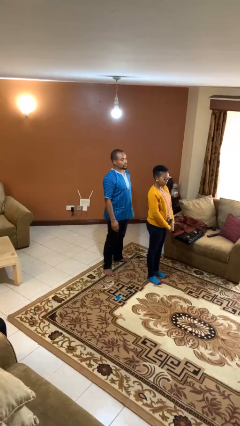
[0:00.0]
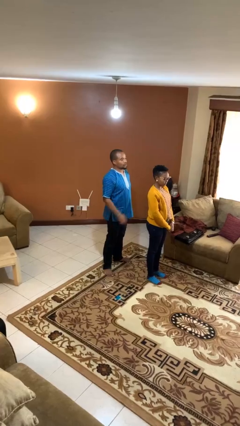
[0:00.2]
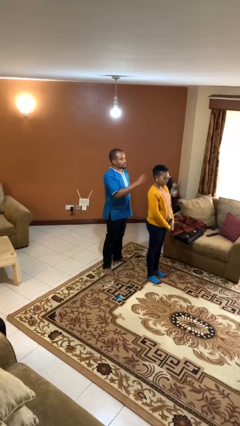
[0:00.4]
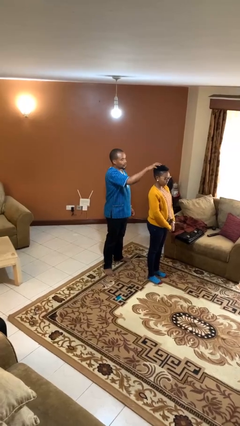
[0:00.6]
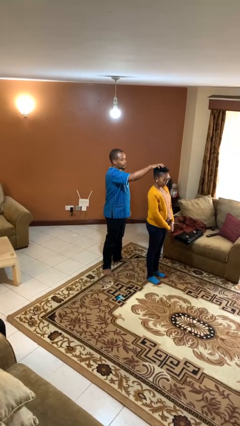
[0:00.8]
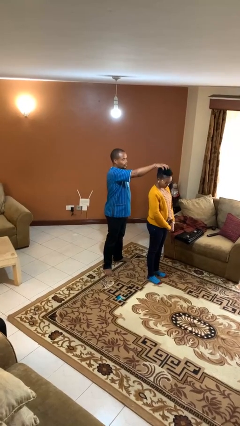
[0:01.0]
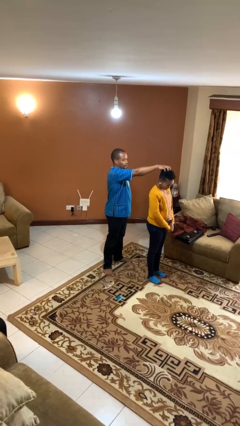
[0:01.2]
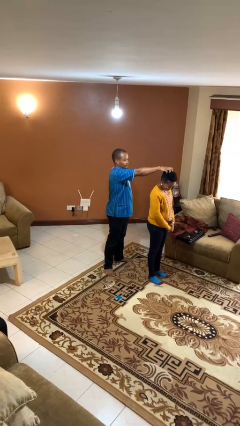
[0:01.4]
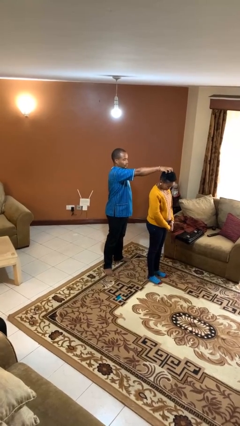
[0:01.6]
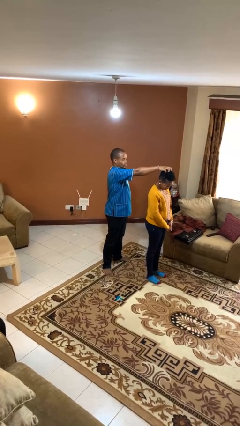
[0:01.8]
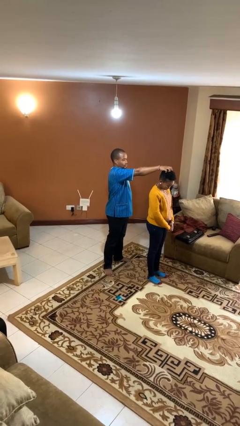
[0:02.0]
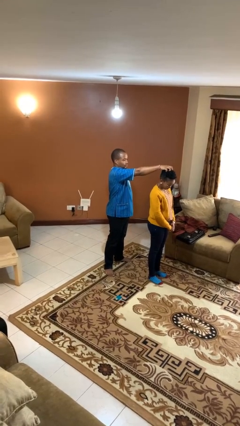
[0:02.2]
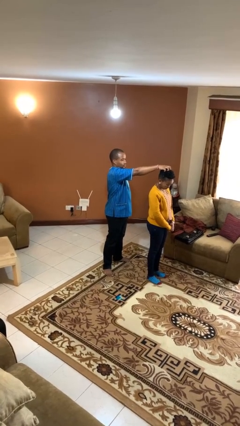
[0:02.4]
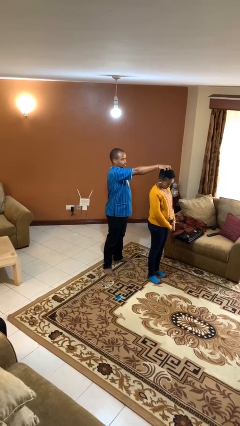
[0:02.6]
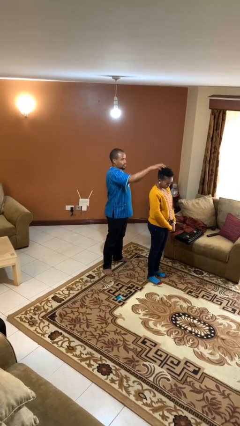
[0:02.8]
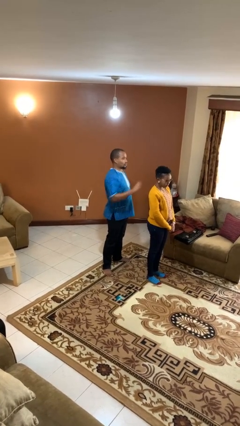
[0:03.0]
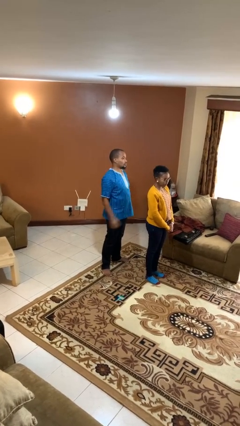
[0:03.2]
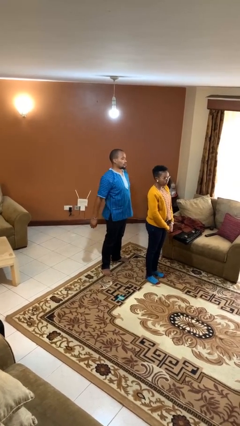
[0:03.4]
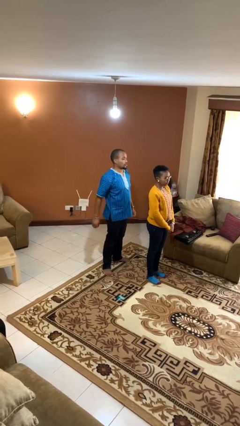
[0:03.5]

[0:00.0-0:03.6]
person grabs person by hair

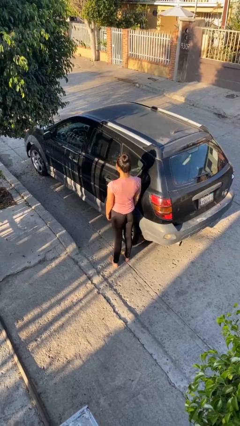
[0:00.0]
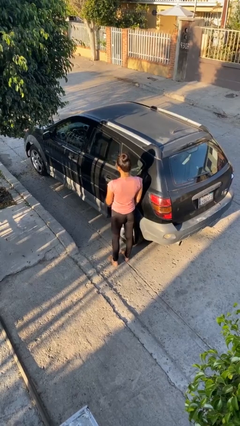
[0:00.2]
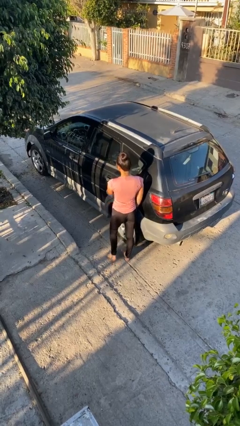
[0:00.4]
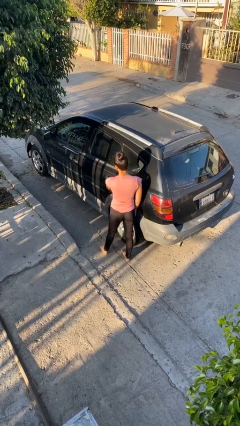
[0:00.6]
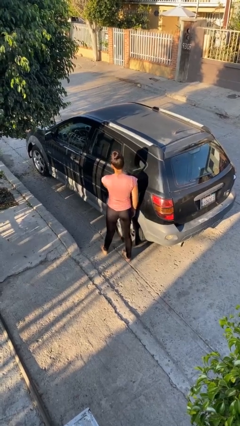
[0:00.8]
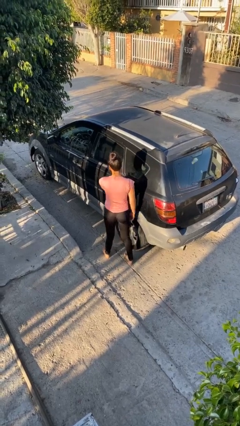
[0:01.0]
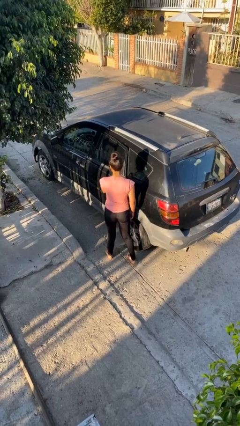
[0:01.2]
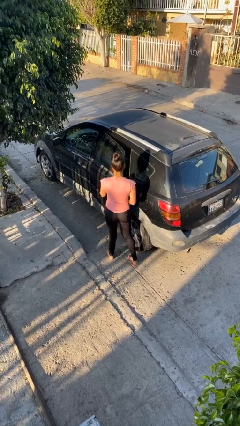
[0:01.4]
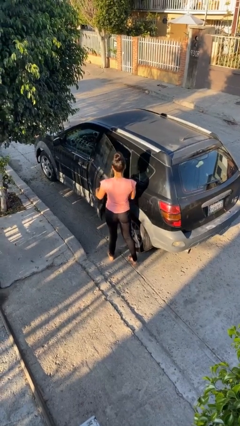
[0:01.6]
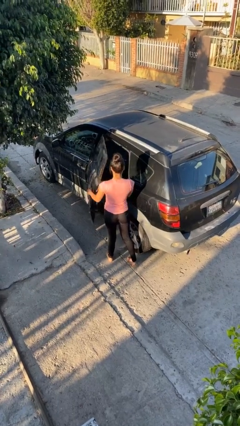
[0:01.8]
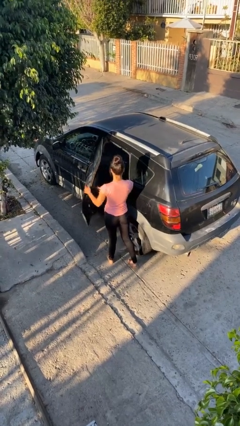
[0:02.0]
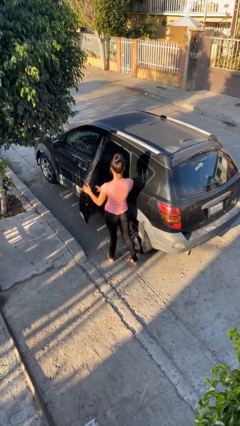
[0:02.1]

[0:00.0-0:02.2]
person opens car door

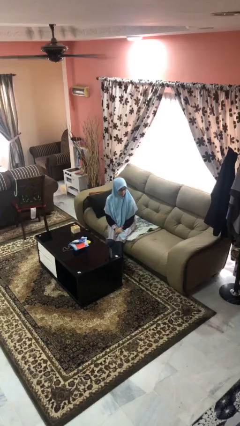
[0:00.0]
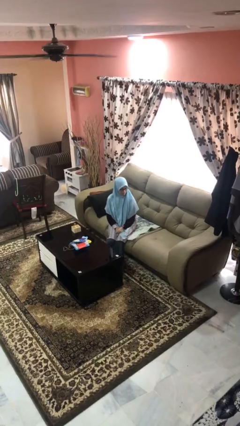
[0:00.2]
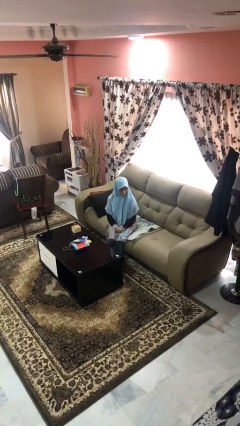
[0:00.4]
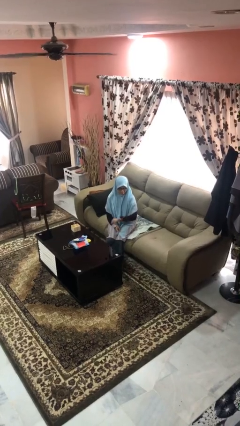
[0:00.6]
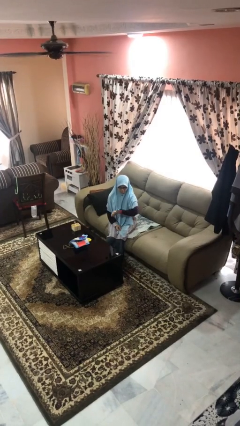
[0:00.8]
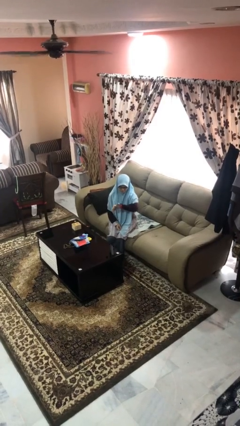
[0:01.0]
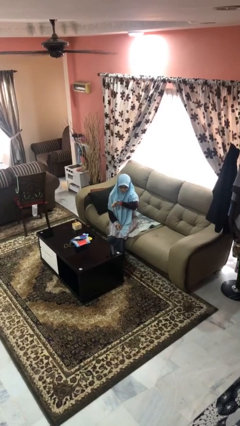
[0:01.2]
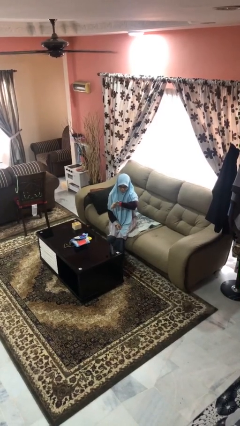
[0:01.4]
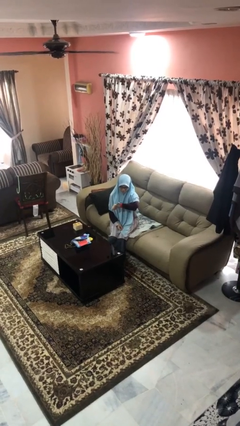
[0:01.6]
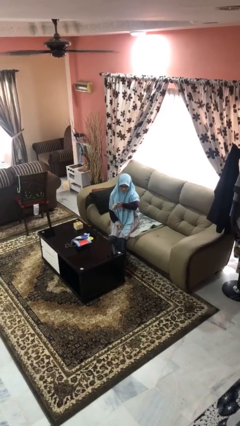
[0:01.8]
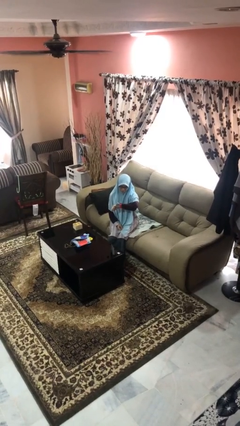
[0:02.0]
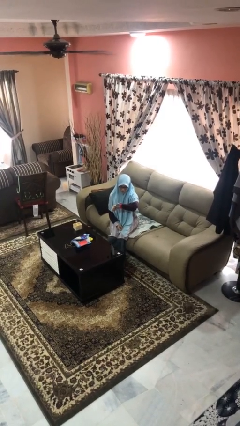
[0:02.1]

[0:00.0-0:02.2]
person looks at wristwatch

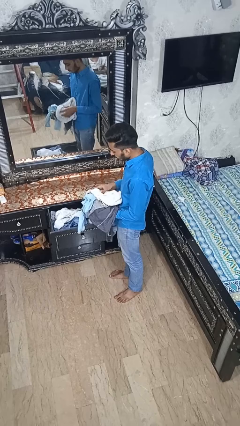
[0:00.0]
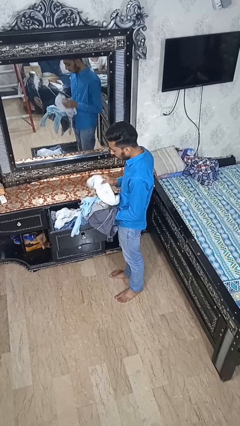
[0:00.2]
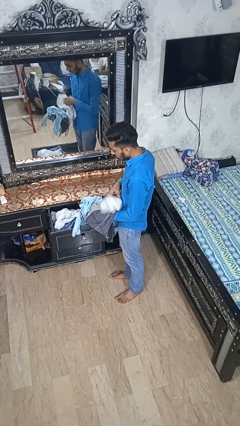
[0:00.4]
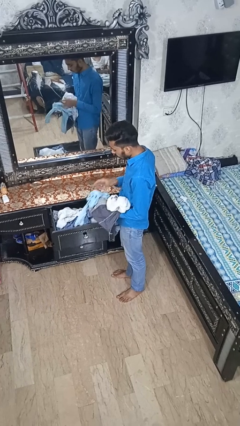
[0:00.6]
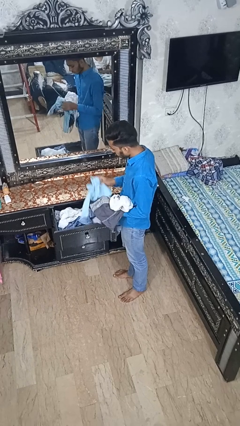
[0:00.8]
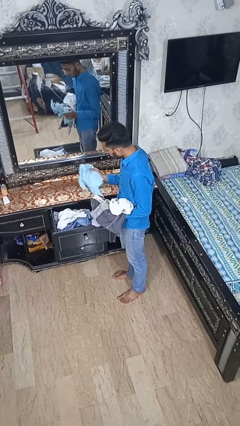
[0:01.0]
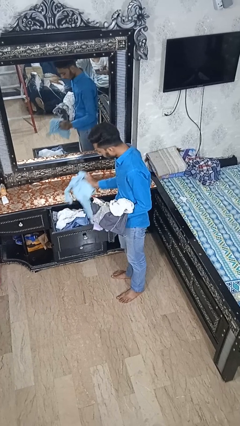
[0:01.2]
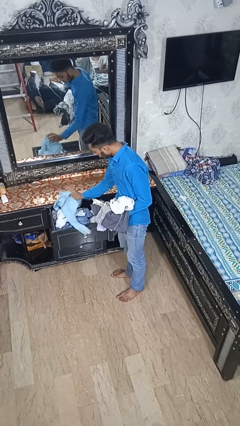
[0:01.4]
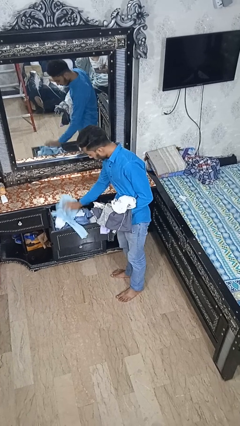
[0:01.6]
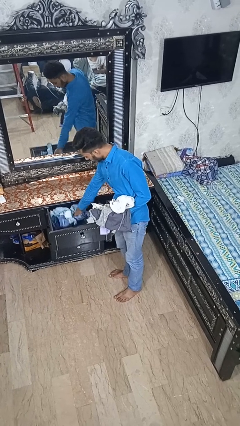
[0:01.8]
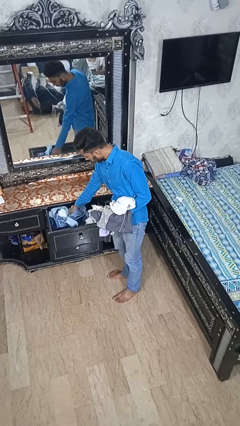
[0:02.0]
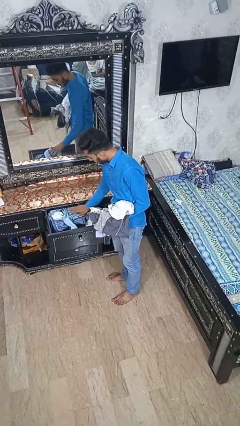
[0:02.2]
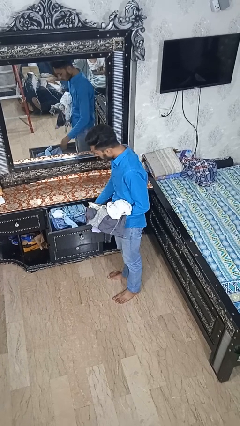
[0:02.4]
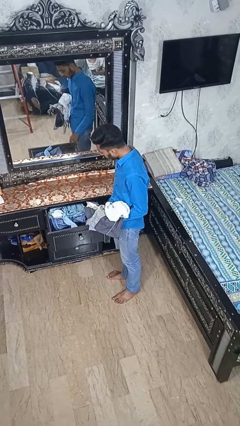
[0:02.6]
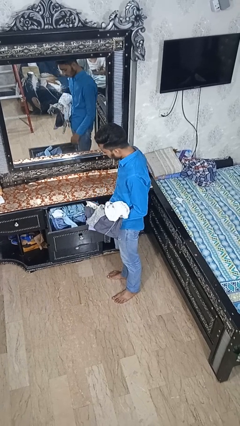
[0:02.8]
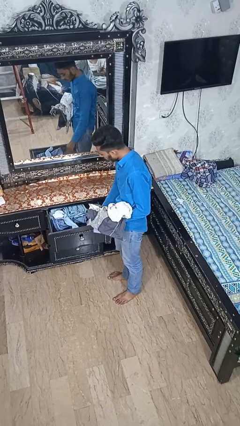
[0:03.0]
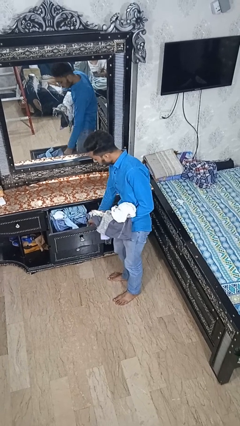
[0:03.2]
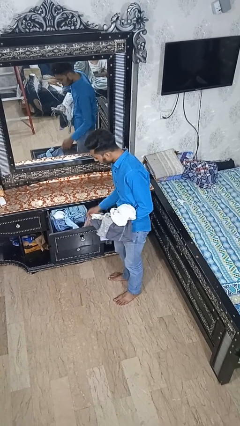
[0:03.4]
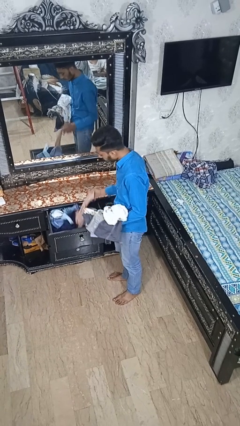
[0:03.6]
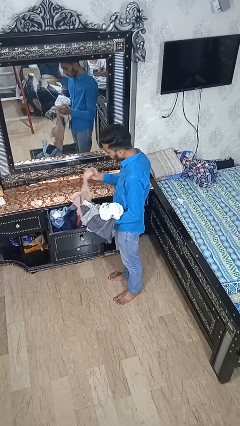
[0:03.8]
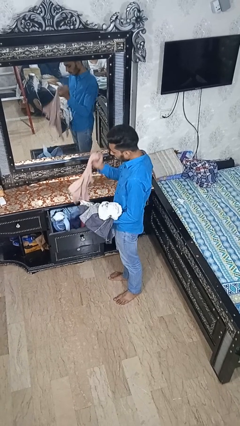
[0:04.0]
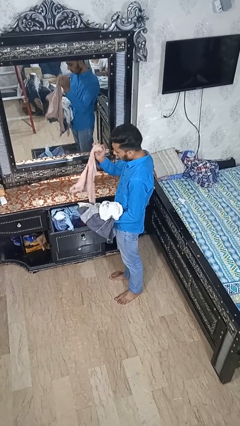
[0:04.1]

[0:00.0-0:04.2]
person puts clothes into dresser

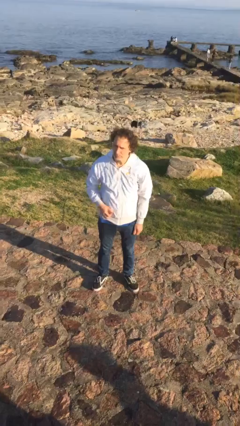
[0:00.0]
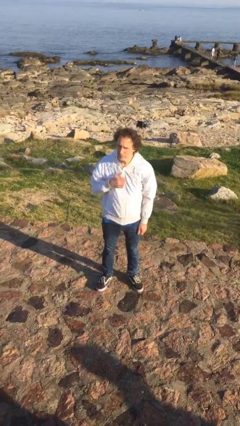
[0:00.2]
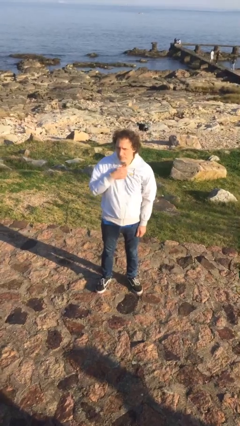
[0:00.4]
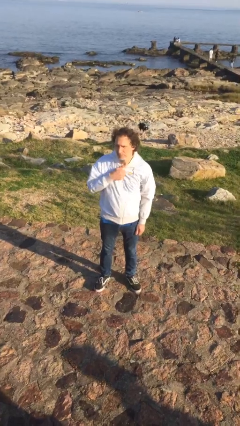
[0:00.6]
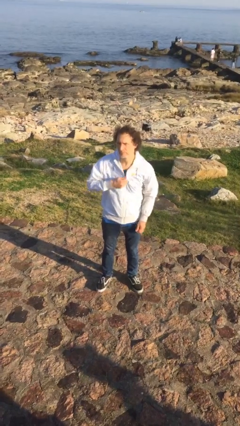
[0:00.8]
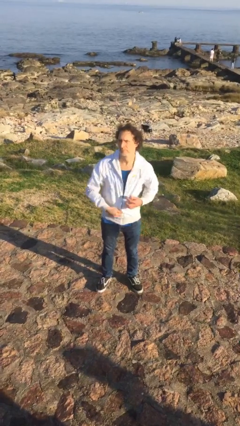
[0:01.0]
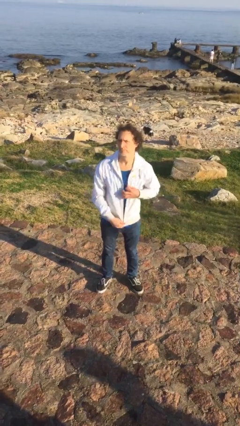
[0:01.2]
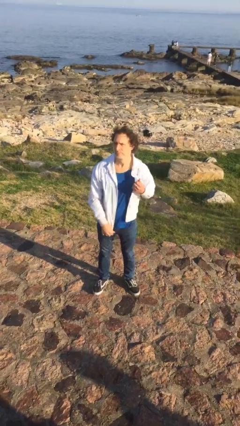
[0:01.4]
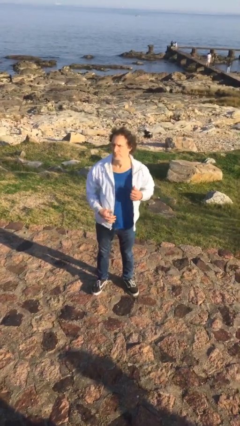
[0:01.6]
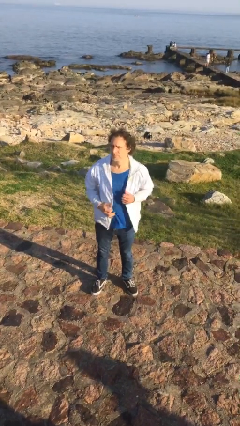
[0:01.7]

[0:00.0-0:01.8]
person unzips jacket

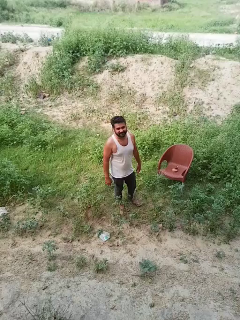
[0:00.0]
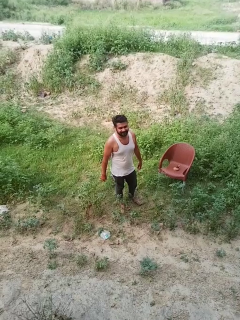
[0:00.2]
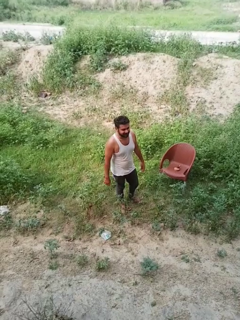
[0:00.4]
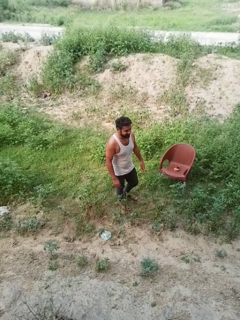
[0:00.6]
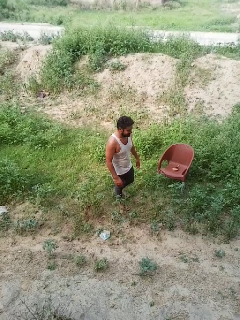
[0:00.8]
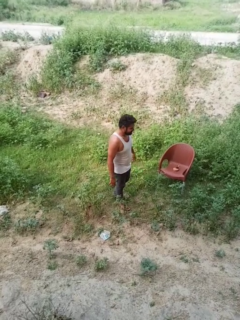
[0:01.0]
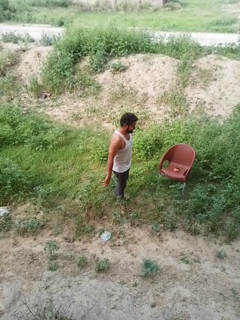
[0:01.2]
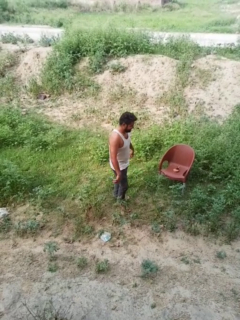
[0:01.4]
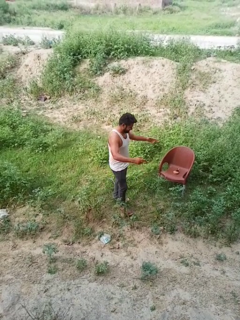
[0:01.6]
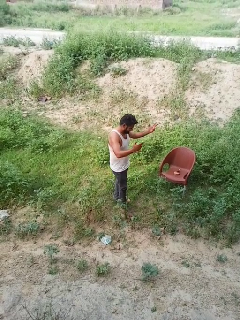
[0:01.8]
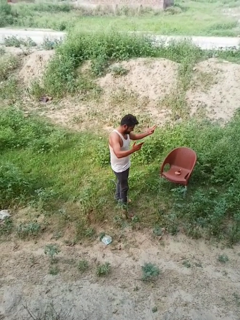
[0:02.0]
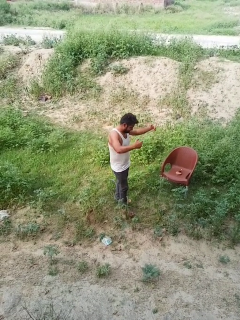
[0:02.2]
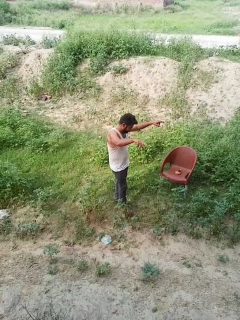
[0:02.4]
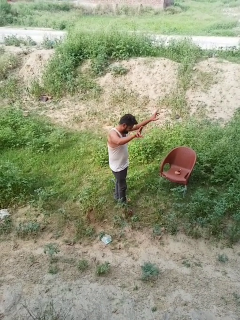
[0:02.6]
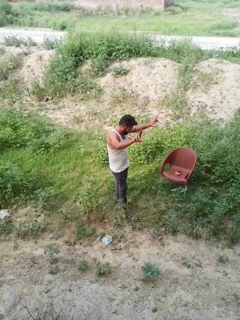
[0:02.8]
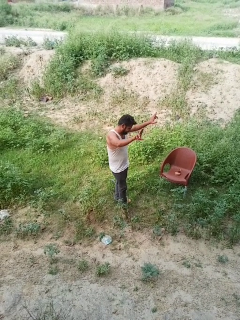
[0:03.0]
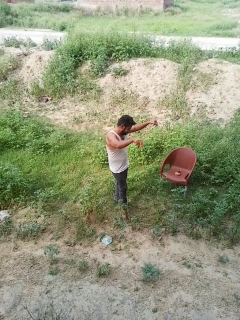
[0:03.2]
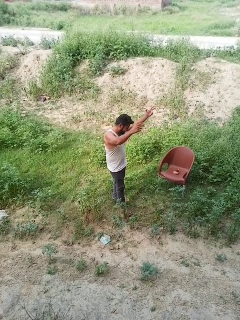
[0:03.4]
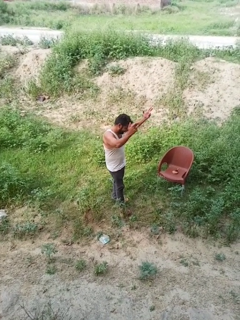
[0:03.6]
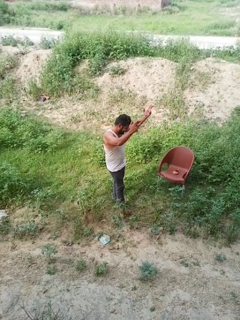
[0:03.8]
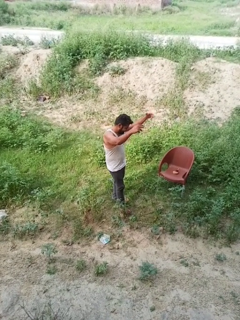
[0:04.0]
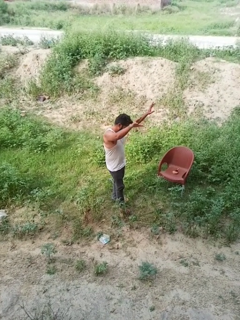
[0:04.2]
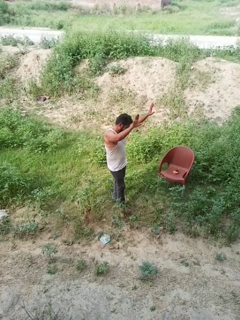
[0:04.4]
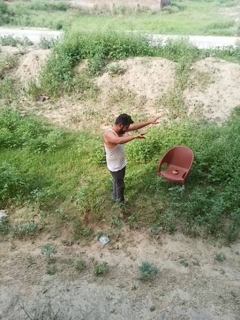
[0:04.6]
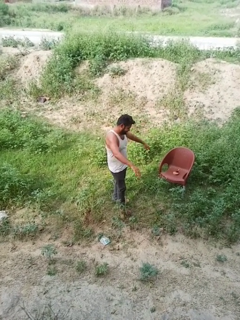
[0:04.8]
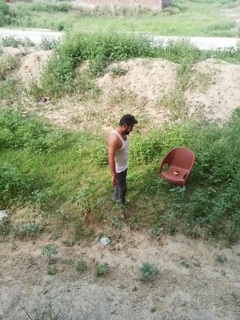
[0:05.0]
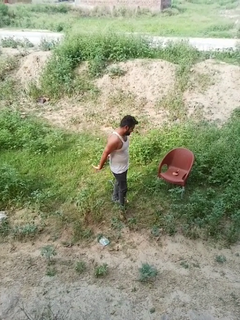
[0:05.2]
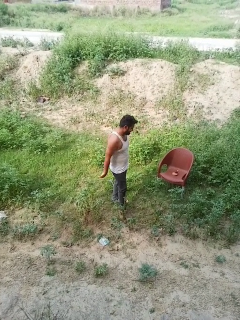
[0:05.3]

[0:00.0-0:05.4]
person dances in place
